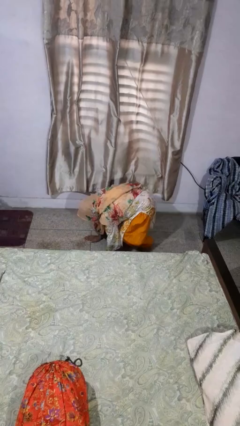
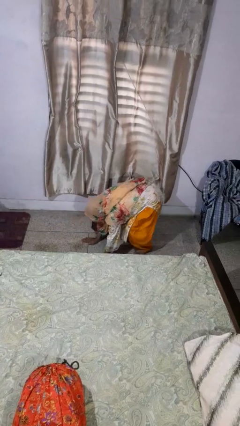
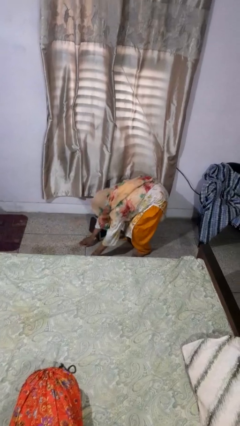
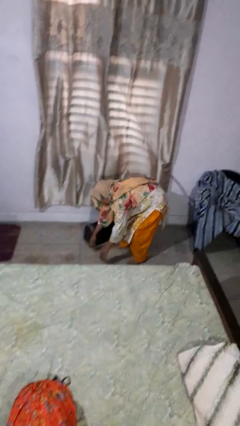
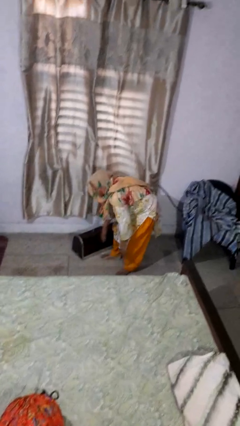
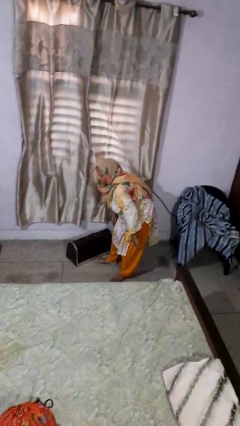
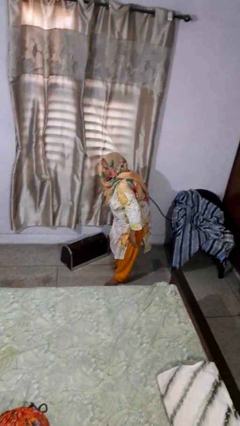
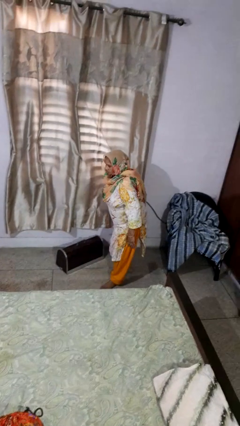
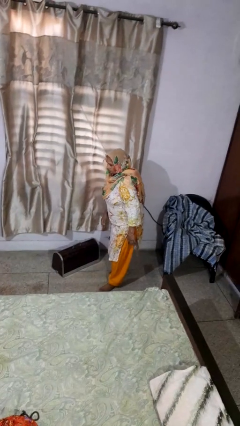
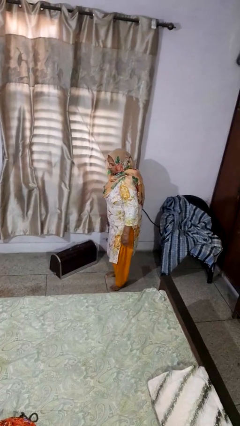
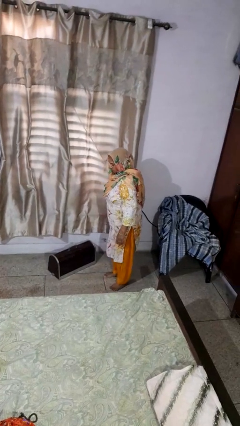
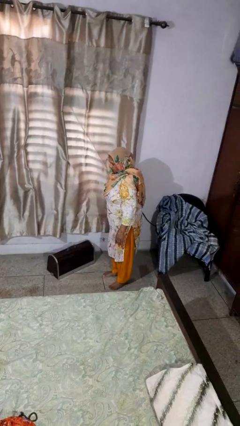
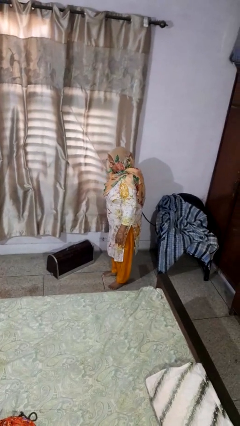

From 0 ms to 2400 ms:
person stands up from floor

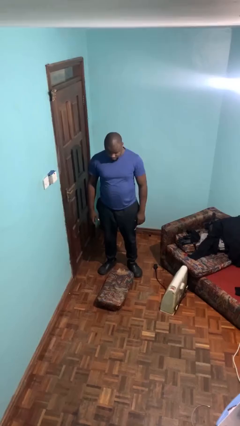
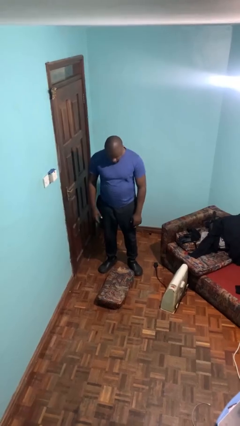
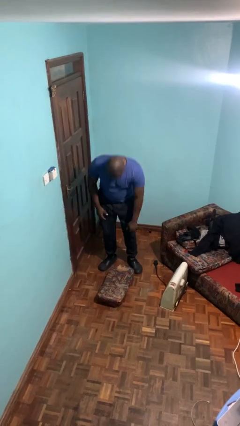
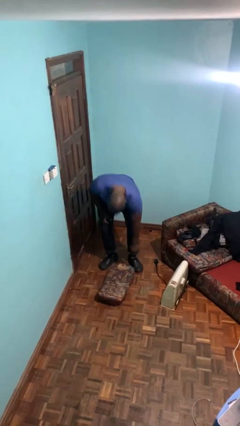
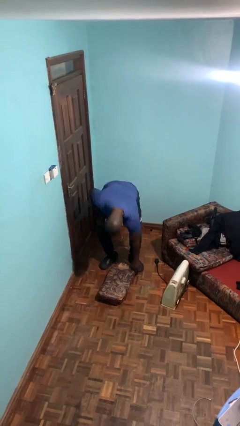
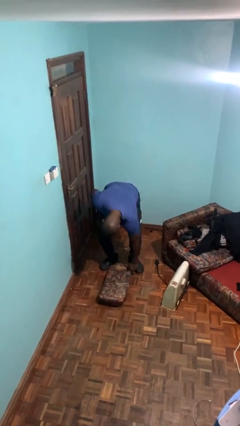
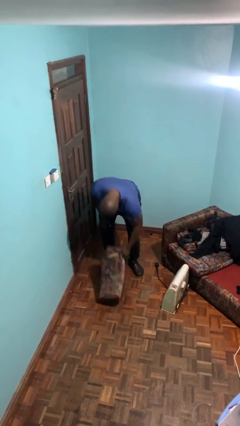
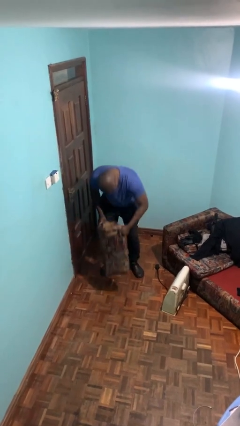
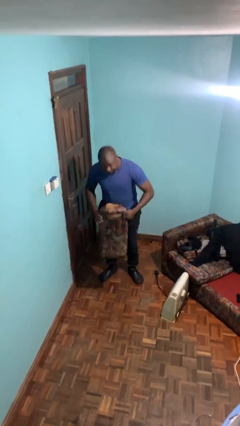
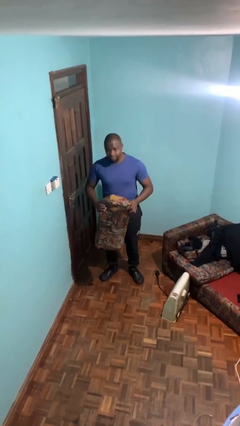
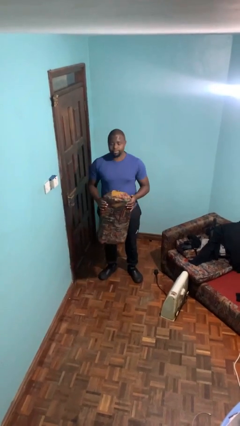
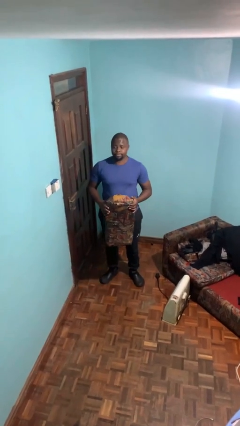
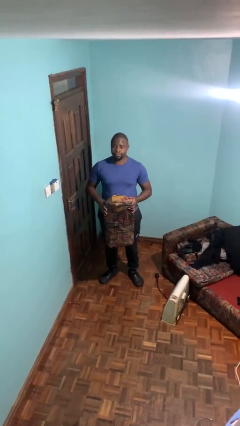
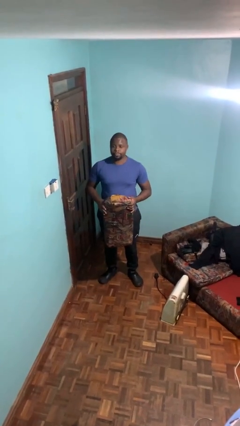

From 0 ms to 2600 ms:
person picks up object from floor

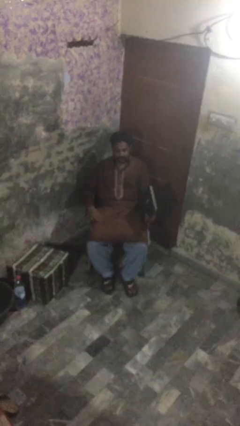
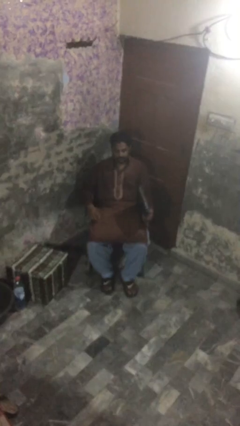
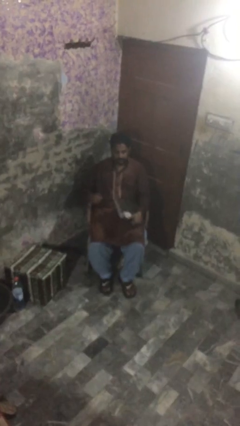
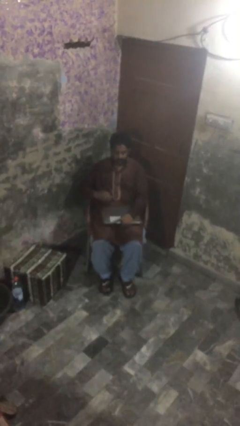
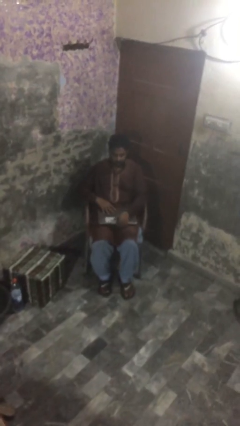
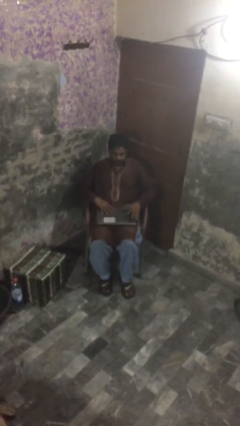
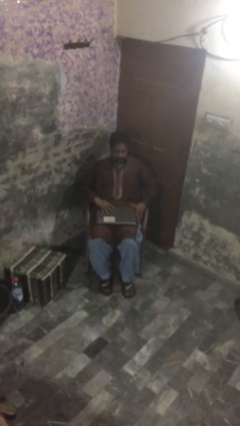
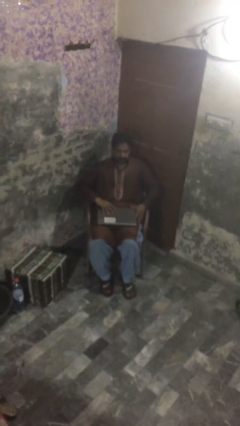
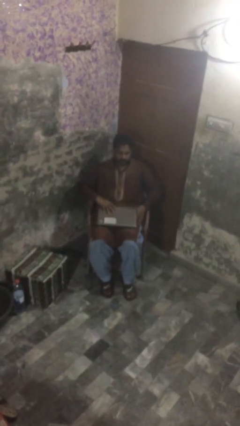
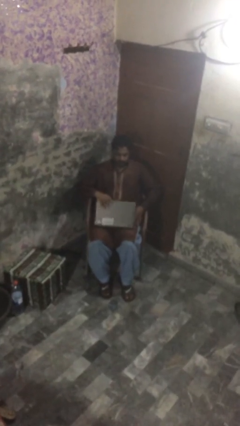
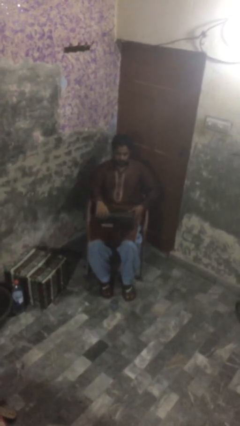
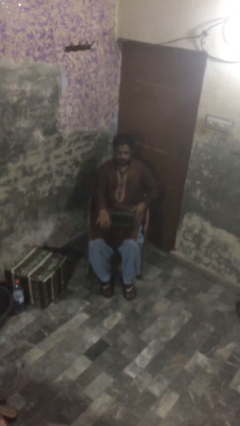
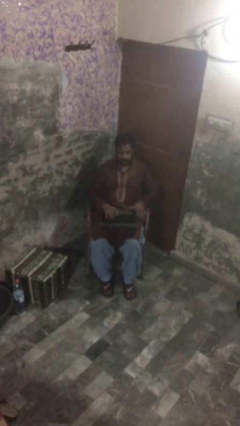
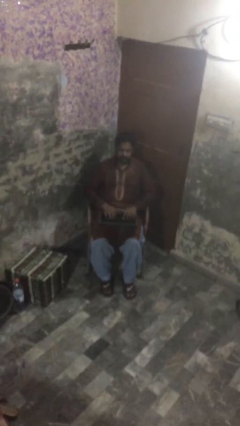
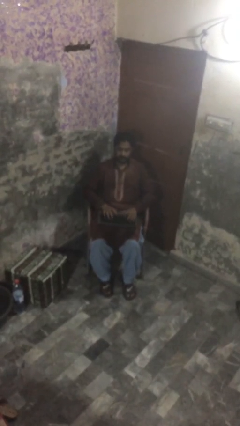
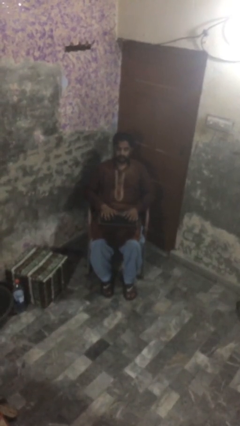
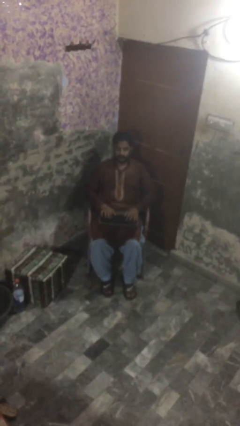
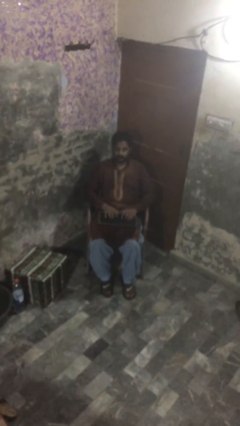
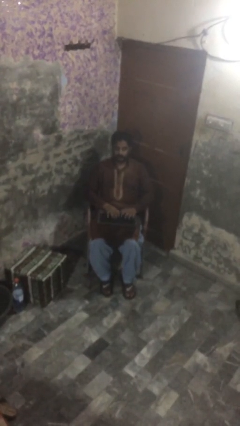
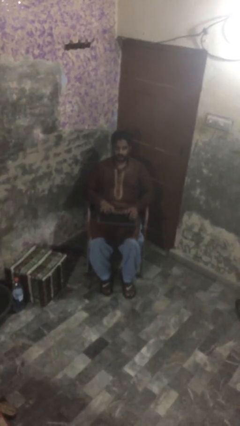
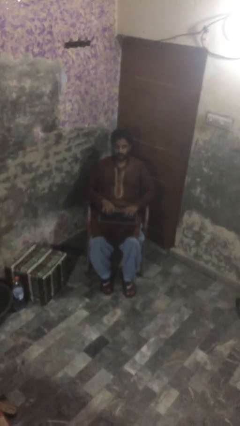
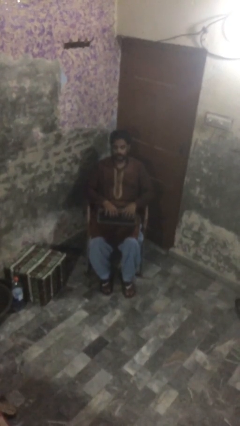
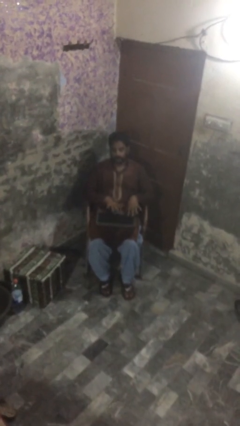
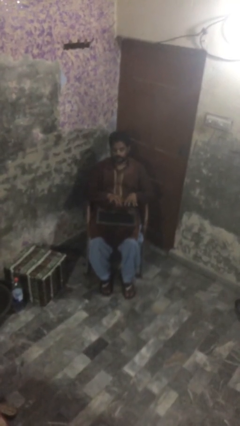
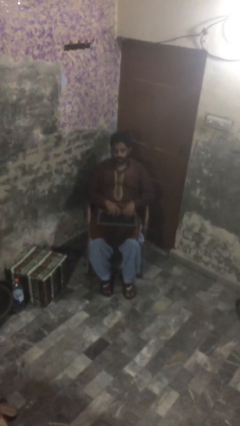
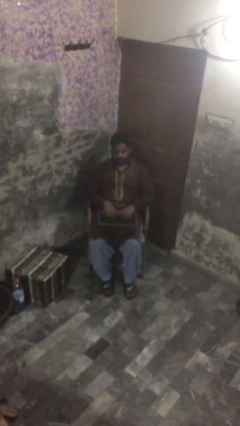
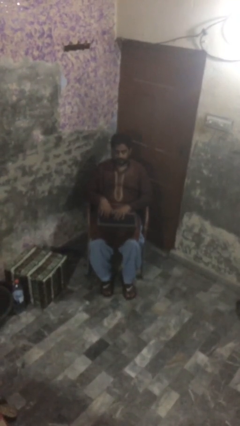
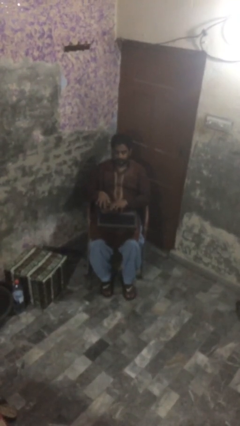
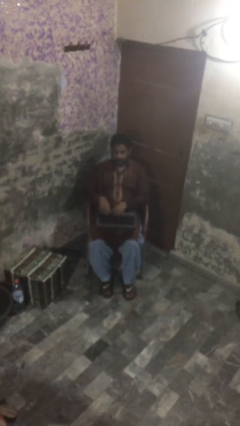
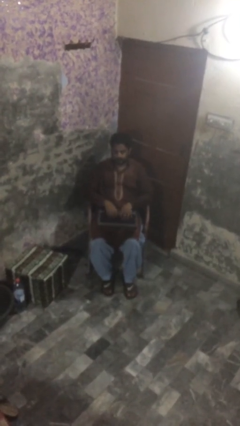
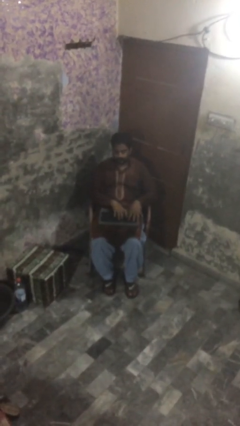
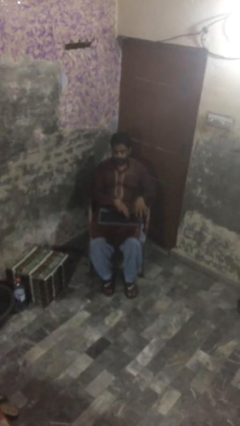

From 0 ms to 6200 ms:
person interacts with laptop

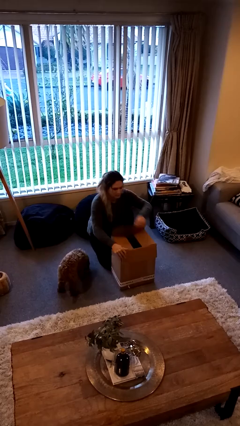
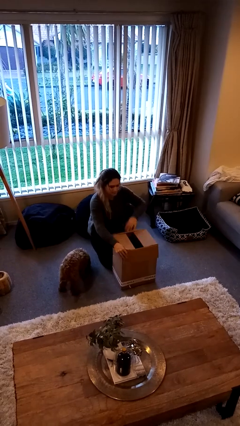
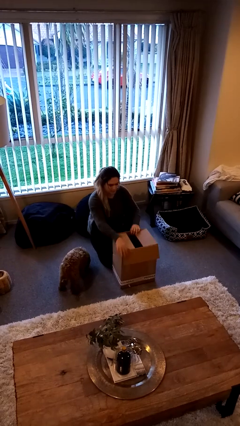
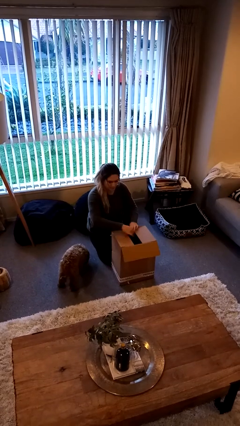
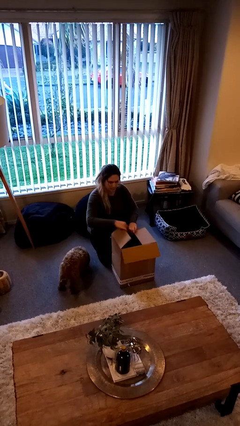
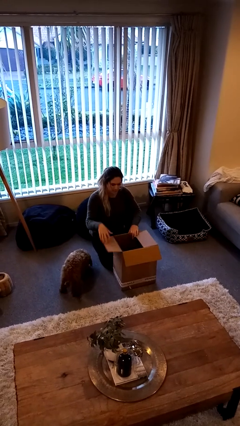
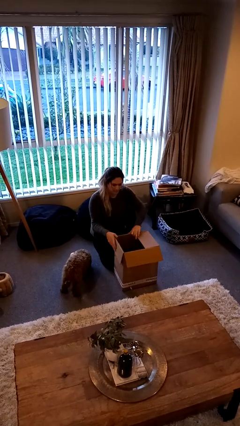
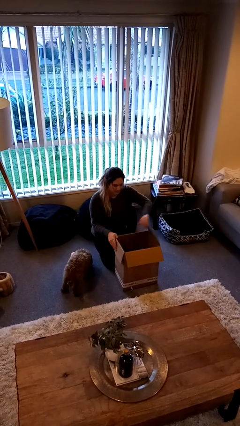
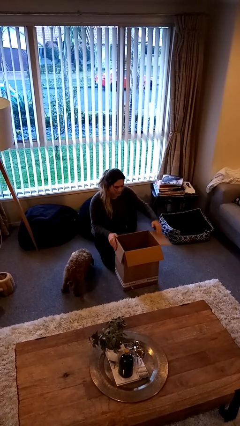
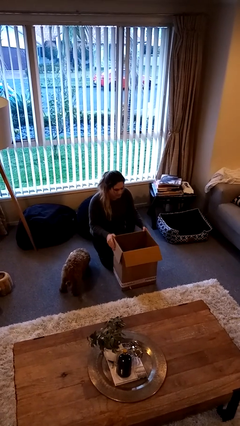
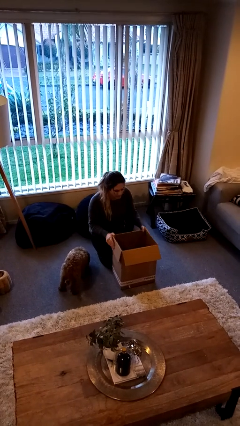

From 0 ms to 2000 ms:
person opens box

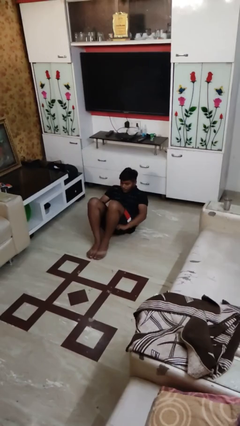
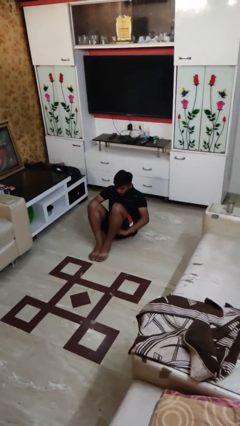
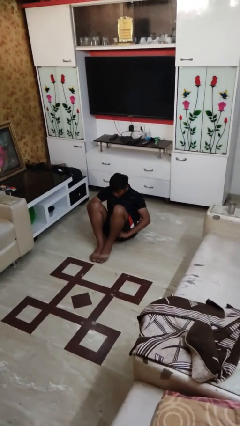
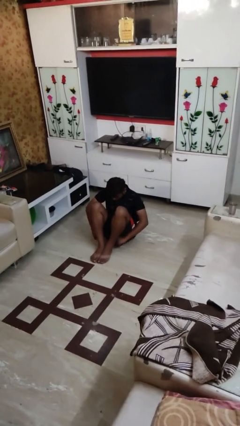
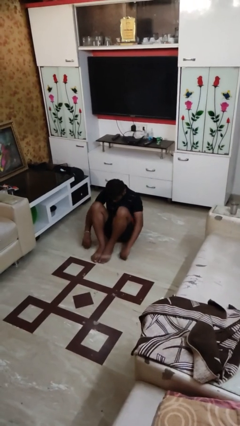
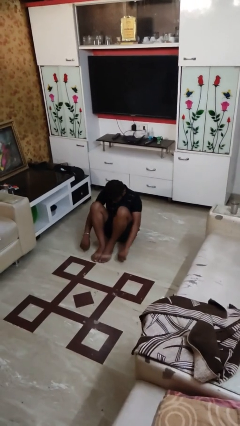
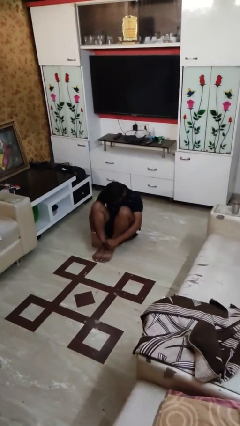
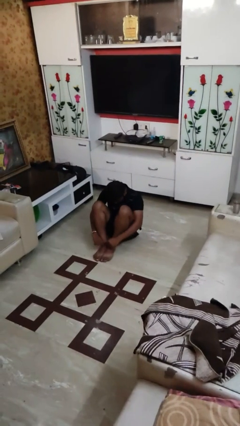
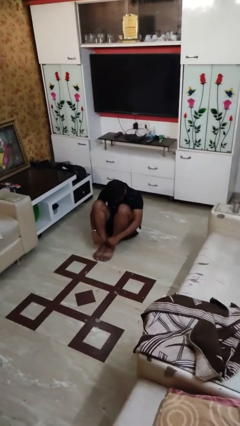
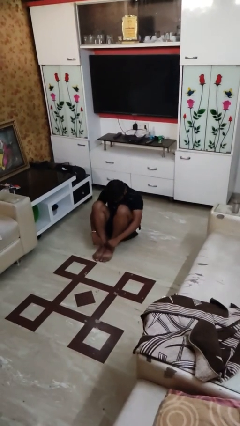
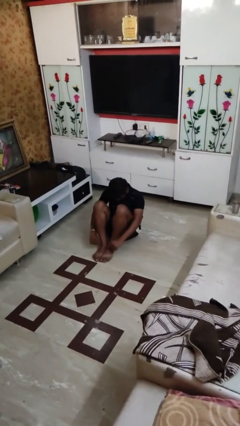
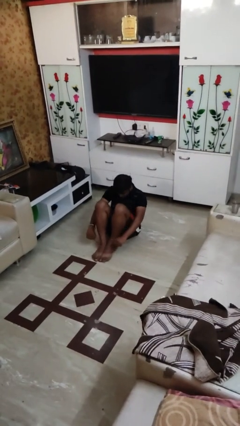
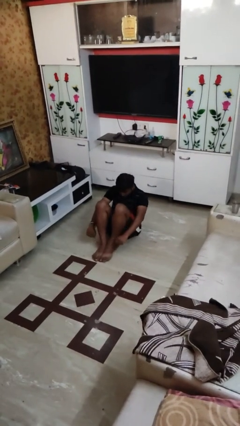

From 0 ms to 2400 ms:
person exercises with situp

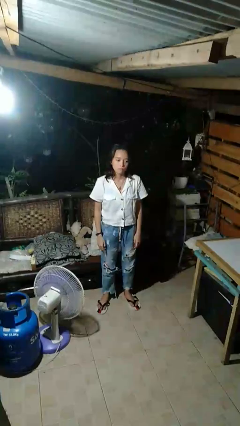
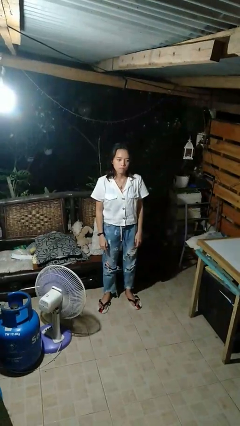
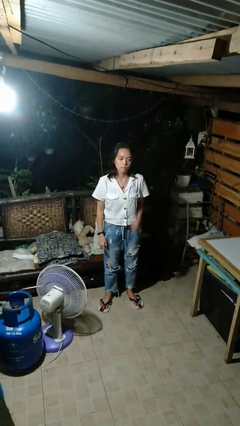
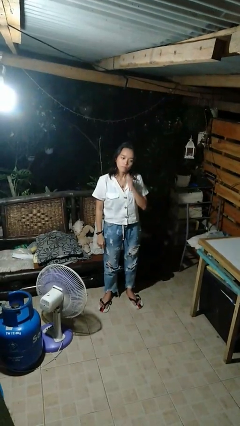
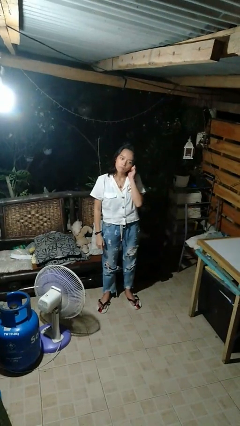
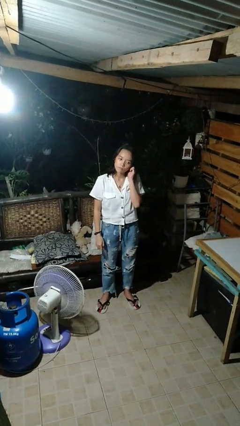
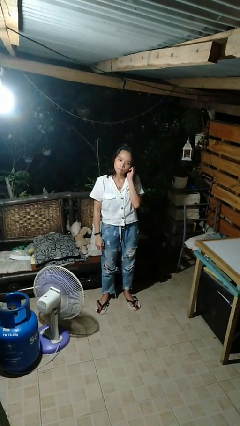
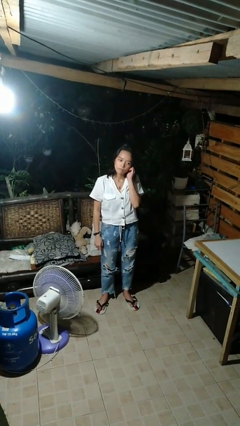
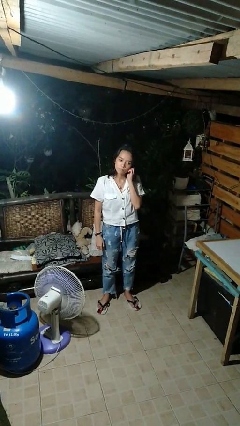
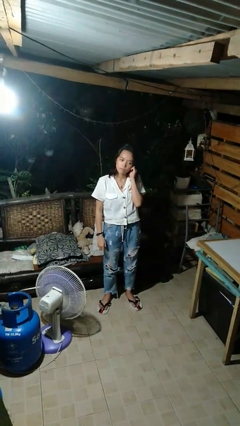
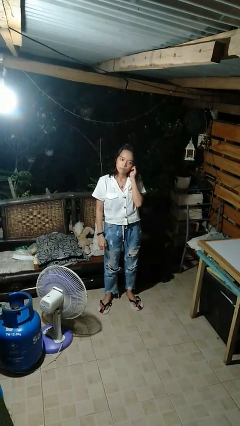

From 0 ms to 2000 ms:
person touches earlobe
